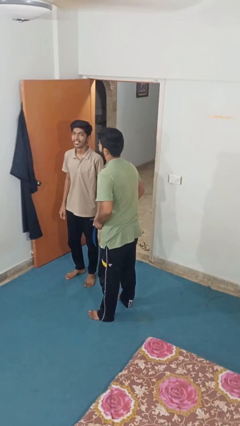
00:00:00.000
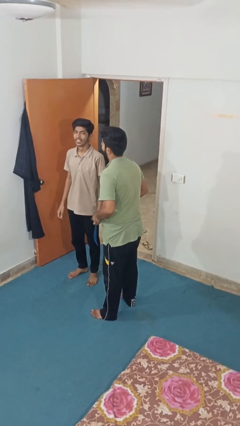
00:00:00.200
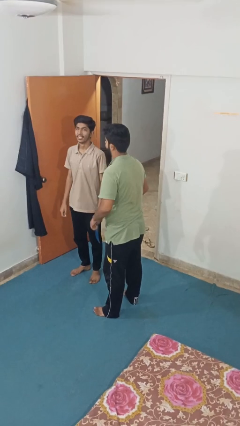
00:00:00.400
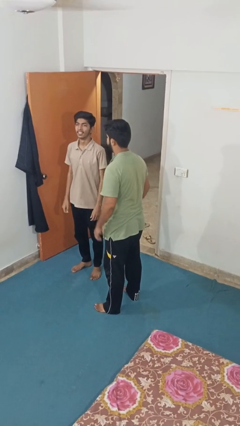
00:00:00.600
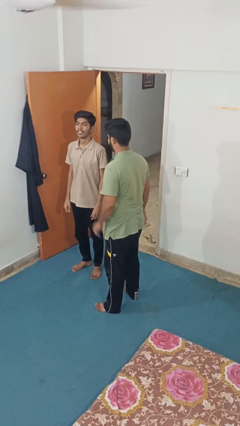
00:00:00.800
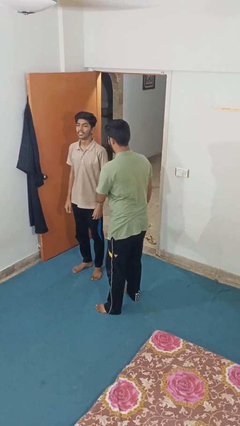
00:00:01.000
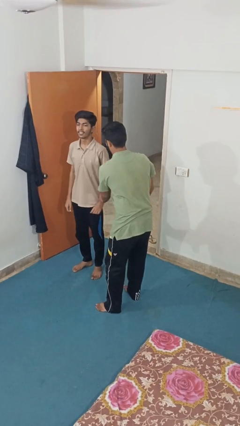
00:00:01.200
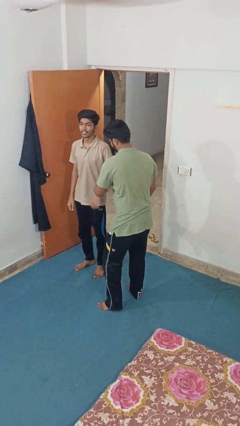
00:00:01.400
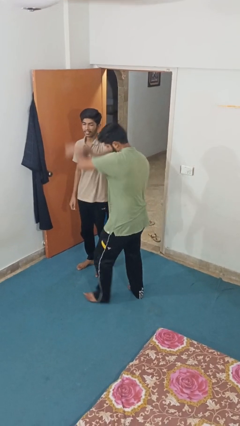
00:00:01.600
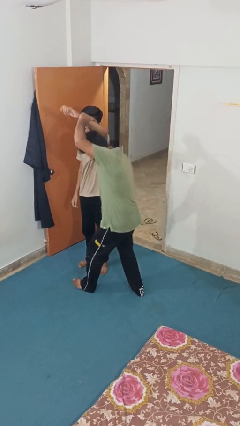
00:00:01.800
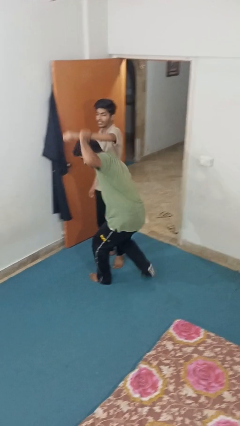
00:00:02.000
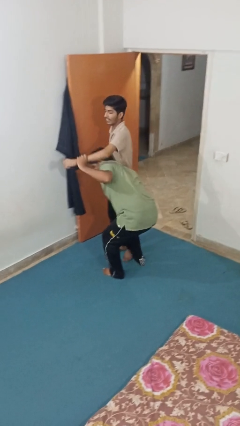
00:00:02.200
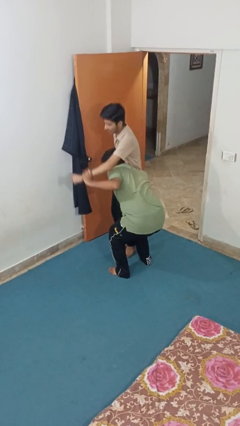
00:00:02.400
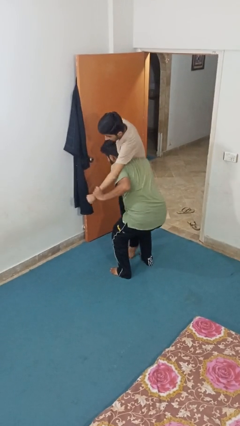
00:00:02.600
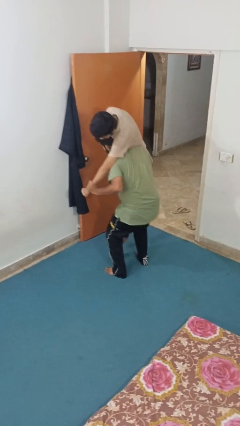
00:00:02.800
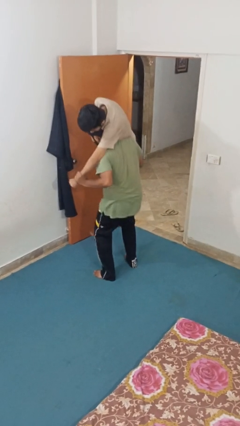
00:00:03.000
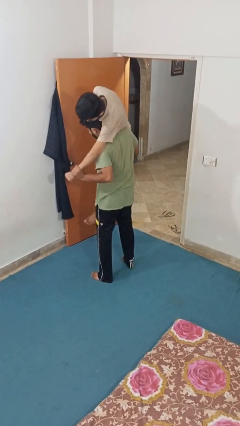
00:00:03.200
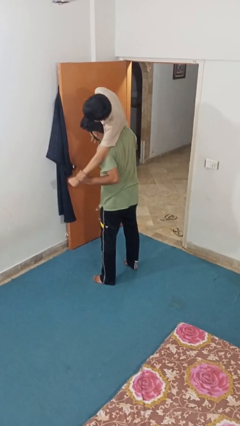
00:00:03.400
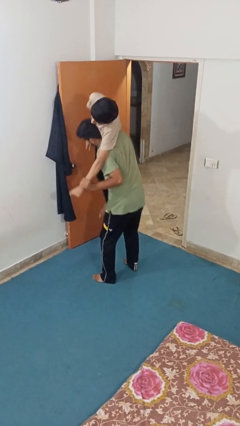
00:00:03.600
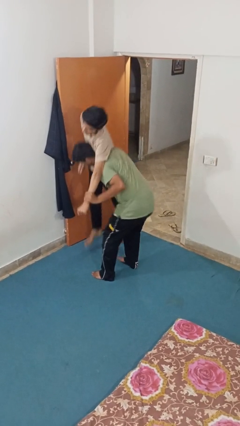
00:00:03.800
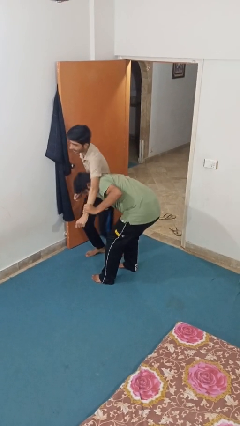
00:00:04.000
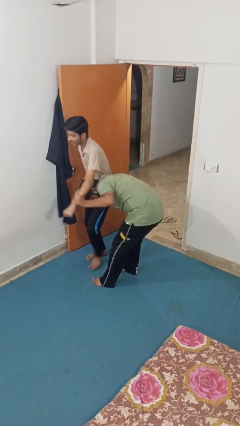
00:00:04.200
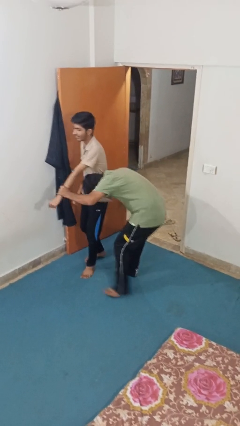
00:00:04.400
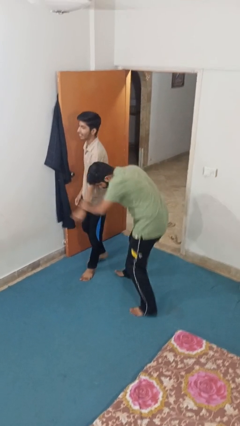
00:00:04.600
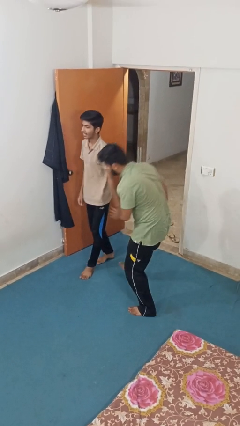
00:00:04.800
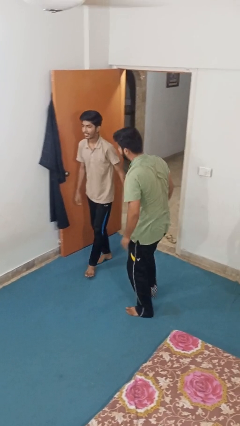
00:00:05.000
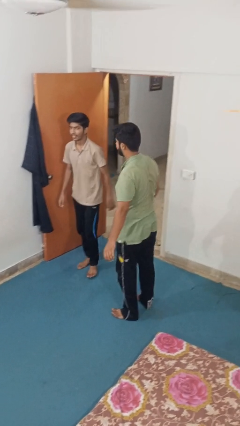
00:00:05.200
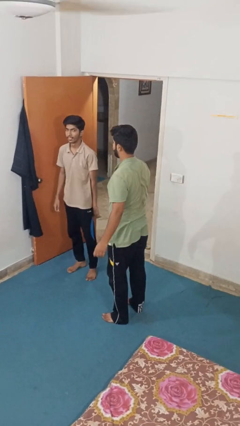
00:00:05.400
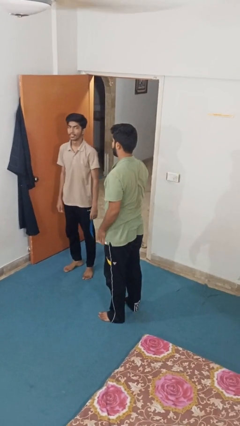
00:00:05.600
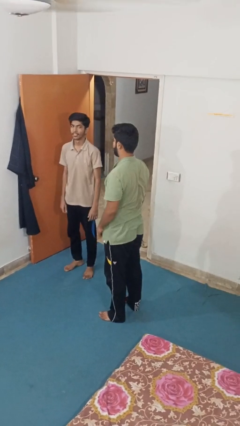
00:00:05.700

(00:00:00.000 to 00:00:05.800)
person carries person over shoulder

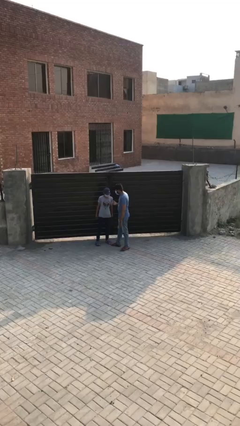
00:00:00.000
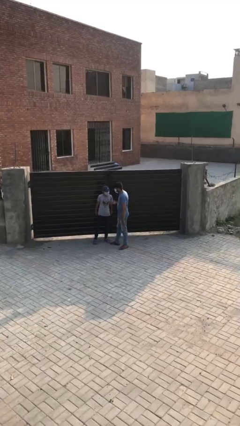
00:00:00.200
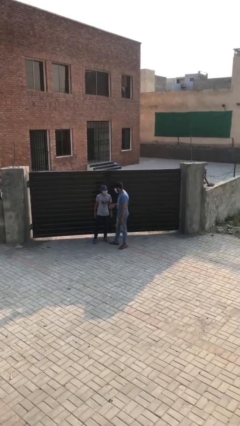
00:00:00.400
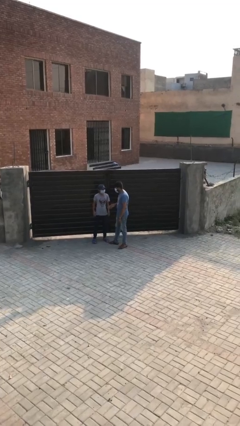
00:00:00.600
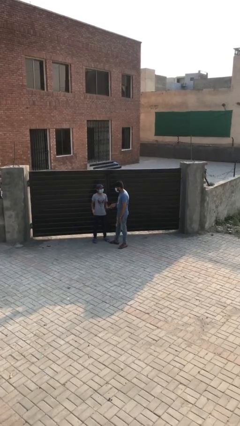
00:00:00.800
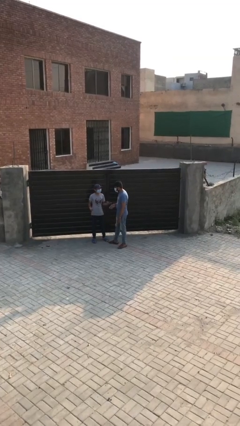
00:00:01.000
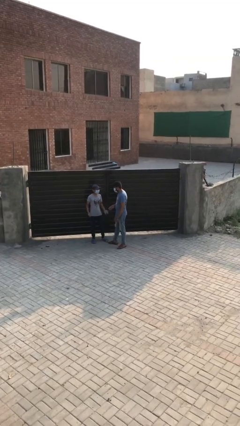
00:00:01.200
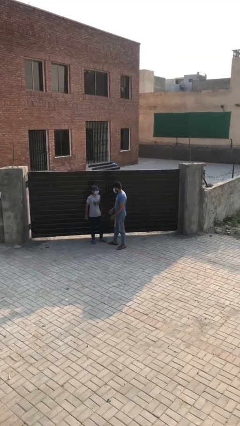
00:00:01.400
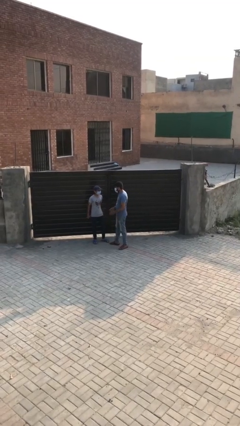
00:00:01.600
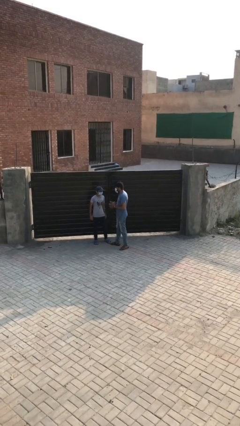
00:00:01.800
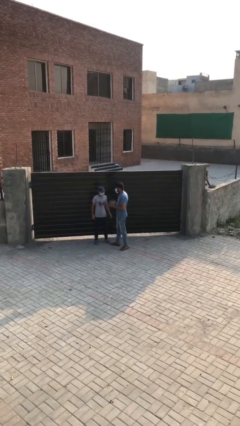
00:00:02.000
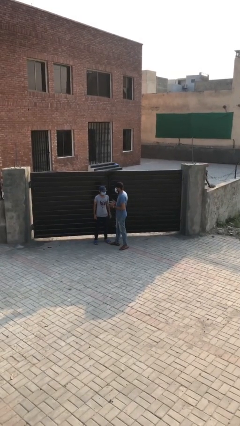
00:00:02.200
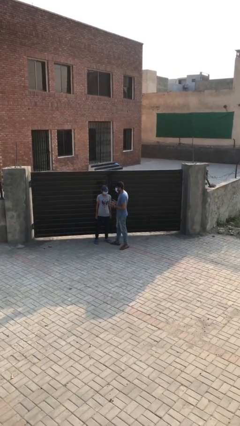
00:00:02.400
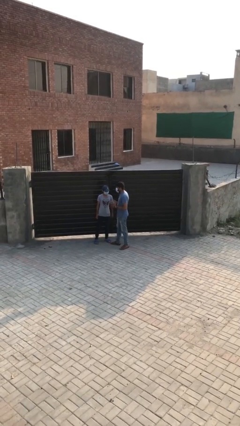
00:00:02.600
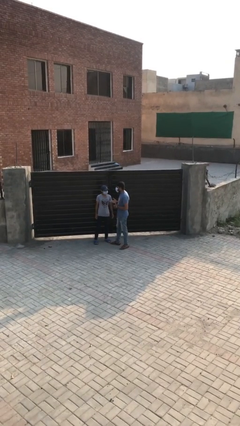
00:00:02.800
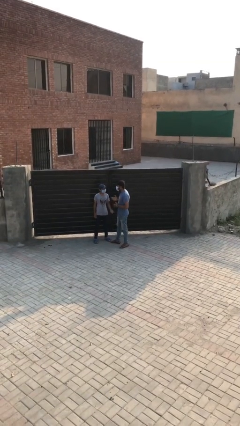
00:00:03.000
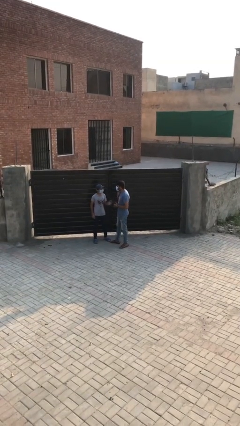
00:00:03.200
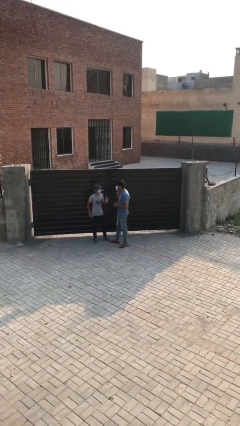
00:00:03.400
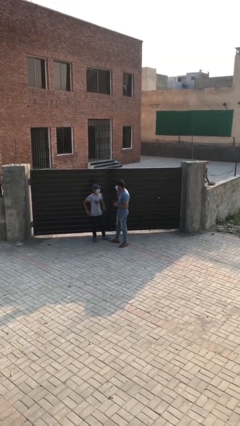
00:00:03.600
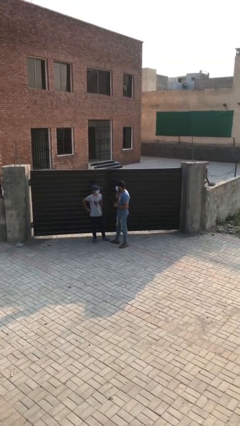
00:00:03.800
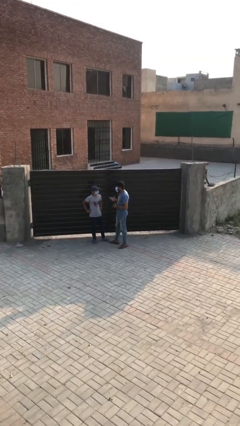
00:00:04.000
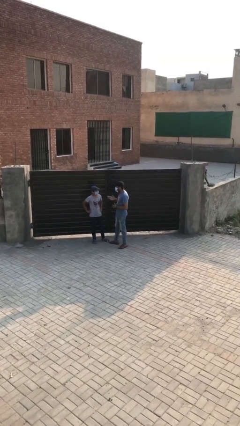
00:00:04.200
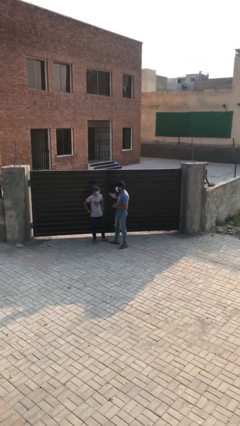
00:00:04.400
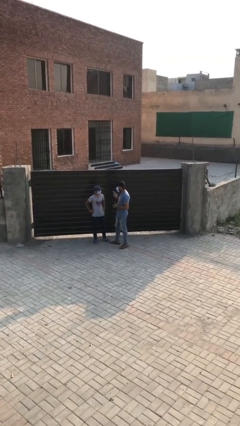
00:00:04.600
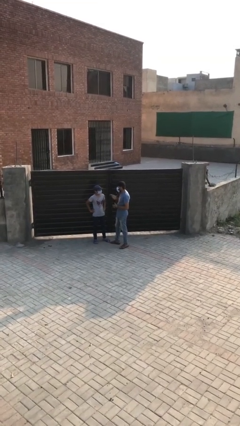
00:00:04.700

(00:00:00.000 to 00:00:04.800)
person talks to person

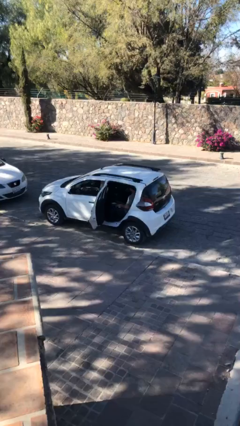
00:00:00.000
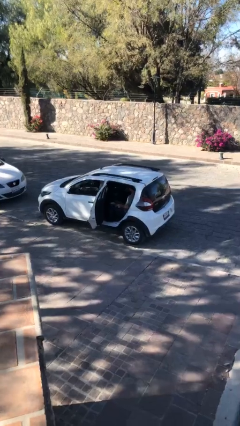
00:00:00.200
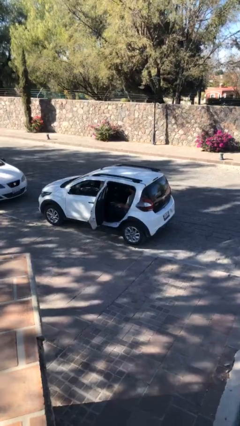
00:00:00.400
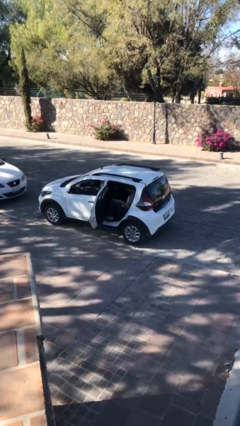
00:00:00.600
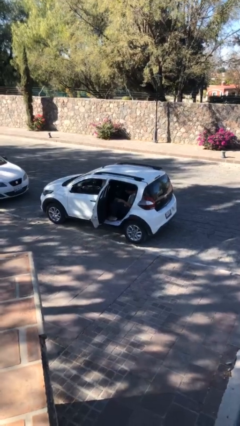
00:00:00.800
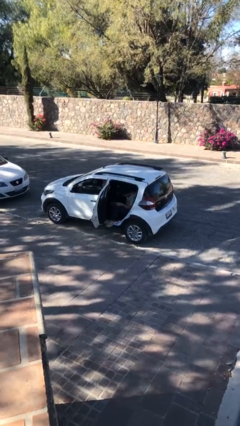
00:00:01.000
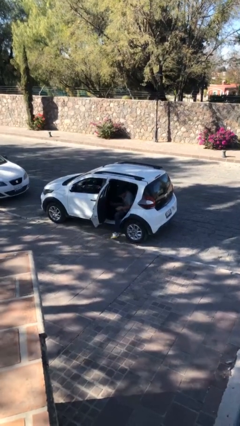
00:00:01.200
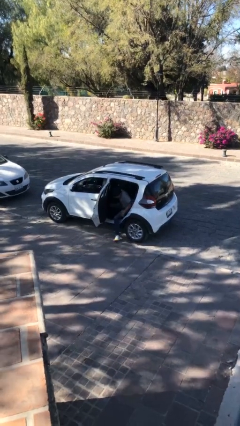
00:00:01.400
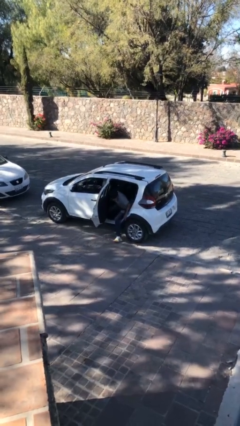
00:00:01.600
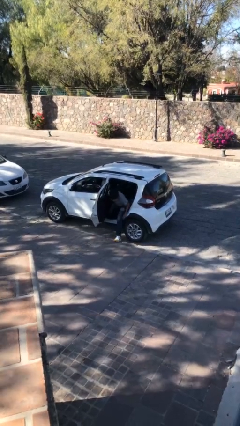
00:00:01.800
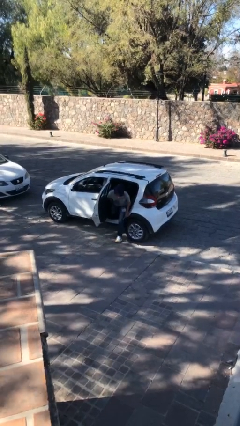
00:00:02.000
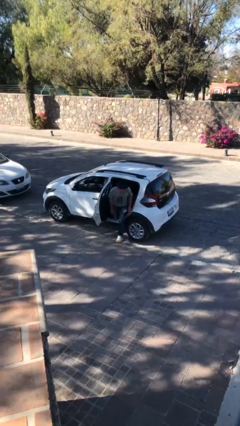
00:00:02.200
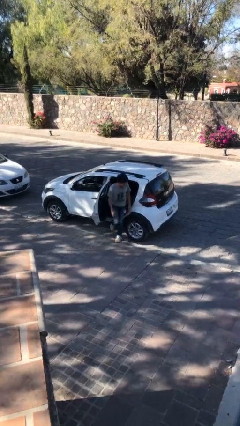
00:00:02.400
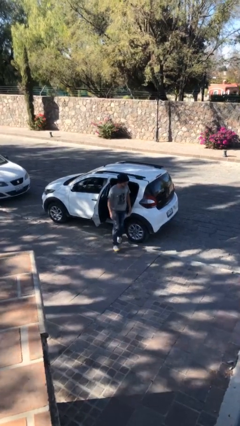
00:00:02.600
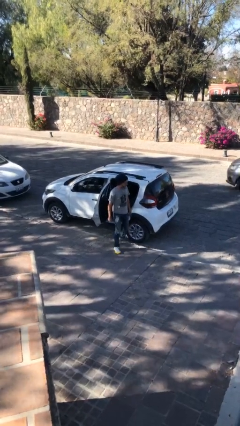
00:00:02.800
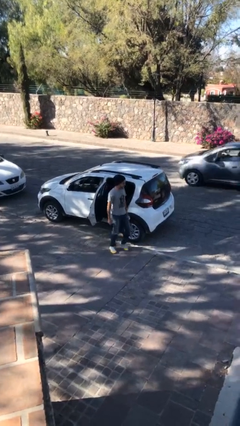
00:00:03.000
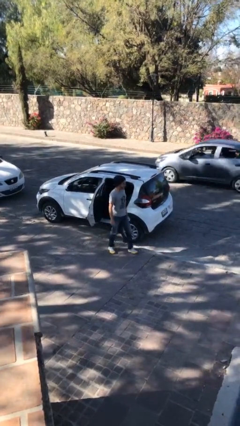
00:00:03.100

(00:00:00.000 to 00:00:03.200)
person exits car

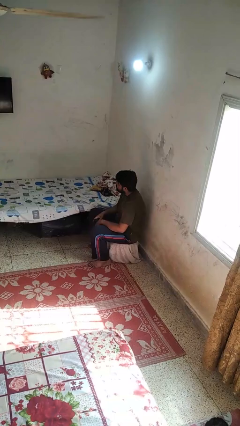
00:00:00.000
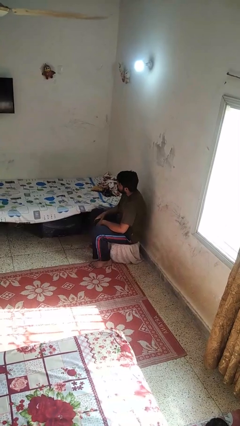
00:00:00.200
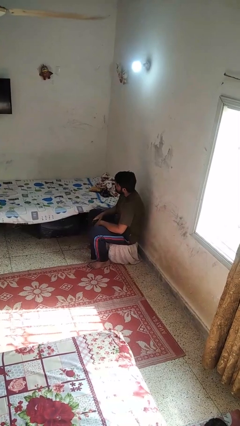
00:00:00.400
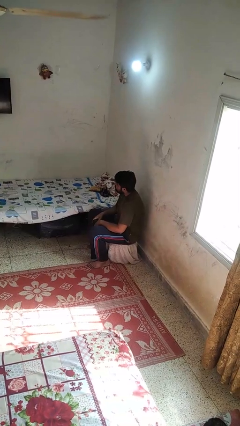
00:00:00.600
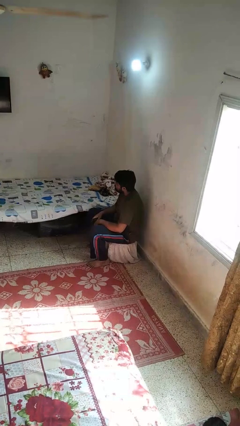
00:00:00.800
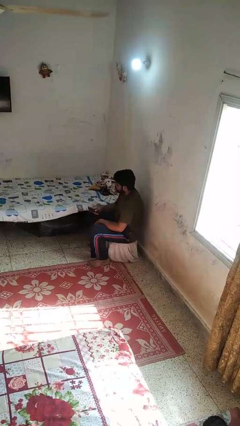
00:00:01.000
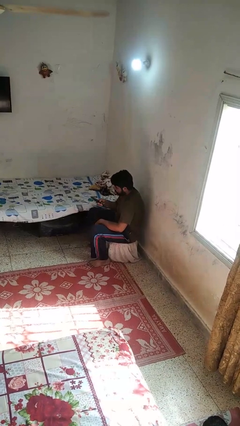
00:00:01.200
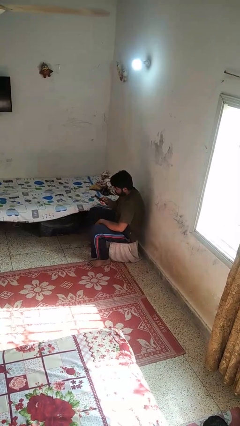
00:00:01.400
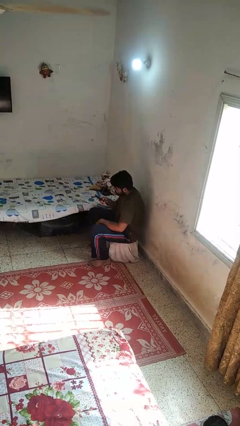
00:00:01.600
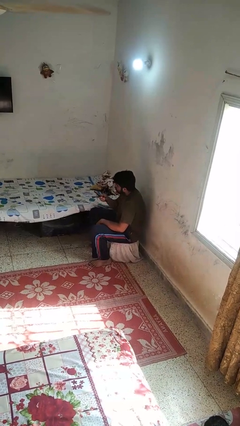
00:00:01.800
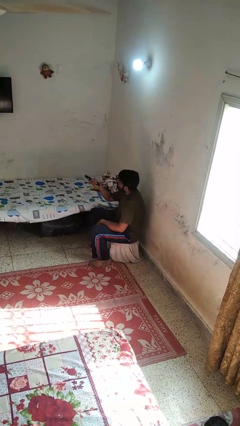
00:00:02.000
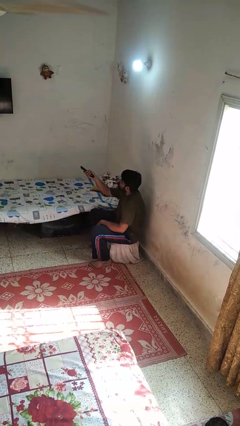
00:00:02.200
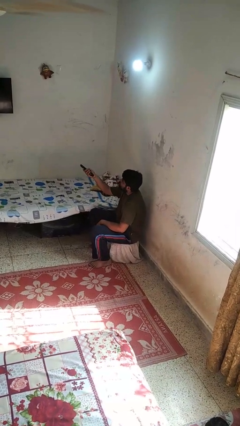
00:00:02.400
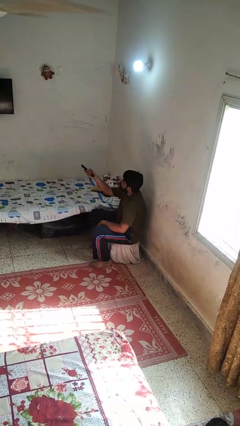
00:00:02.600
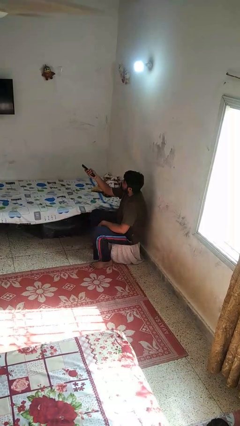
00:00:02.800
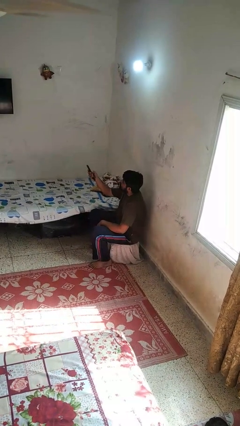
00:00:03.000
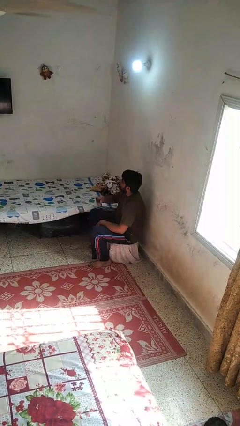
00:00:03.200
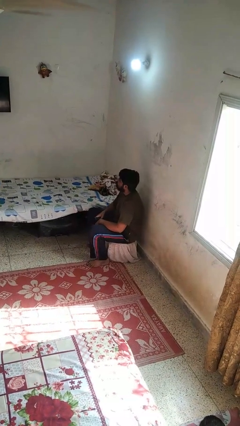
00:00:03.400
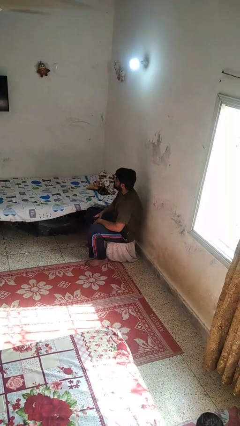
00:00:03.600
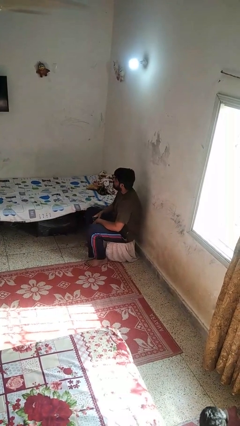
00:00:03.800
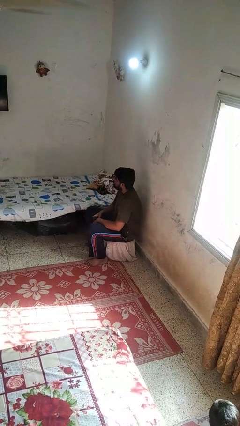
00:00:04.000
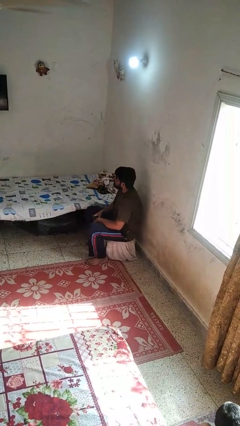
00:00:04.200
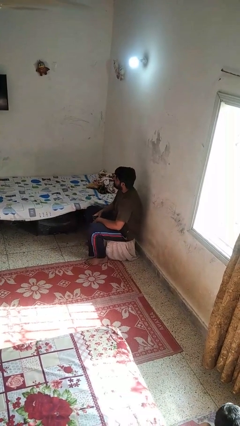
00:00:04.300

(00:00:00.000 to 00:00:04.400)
person uses television remote
